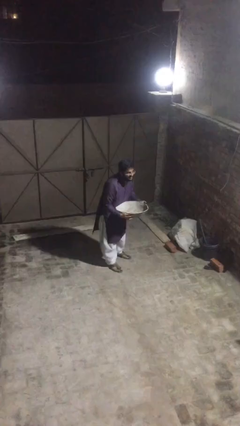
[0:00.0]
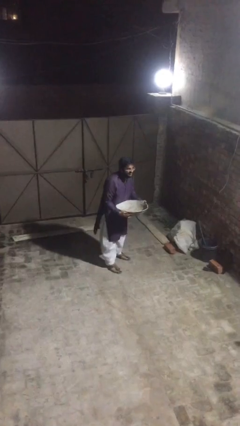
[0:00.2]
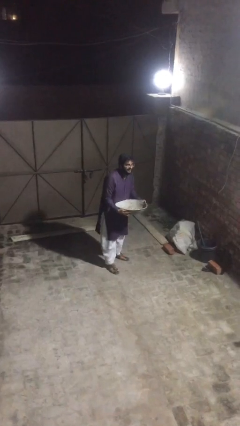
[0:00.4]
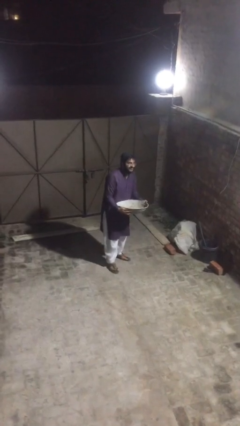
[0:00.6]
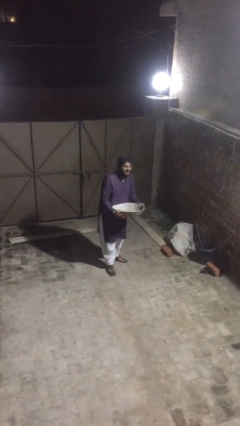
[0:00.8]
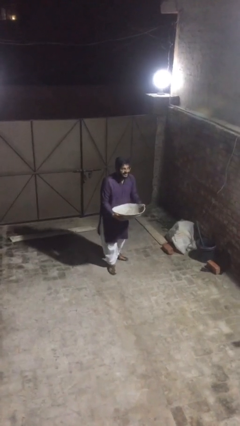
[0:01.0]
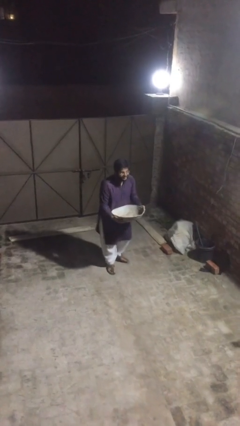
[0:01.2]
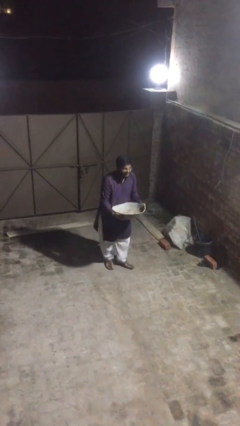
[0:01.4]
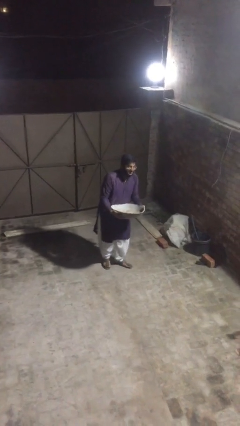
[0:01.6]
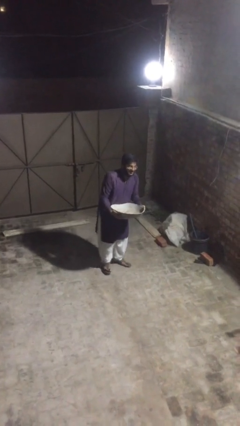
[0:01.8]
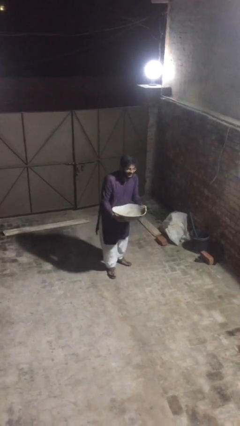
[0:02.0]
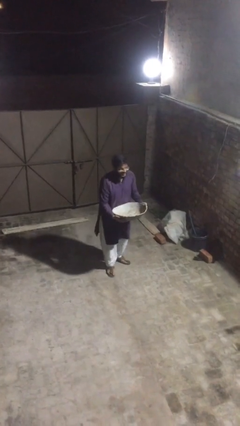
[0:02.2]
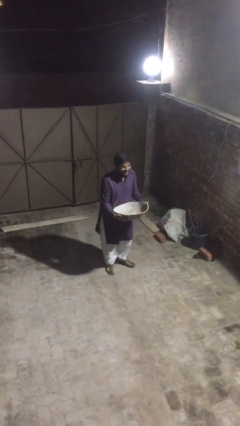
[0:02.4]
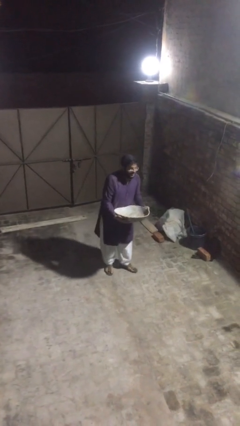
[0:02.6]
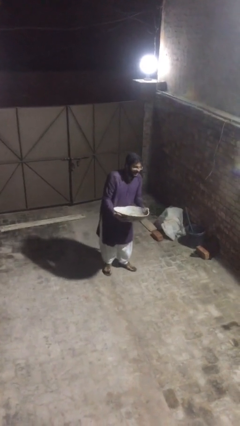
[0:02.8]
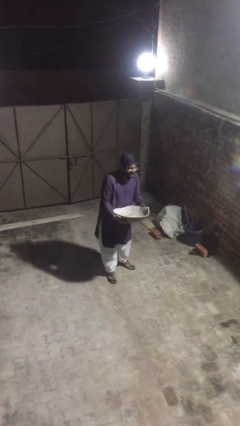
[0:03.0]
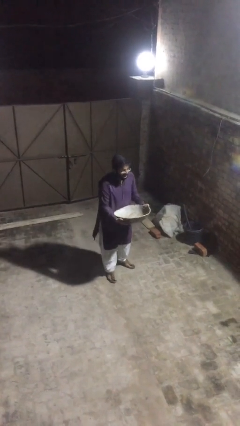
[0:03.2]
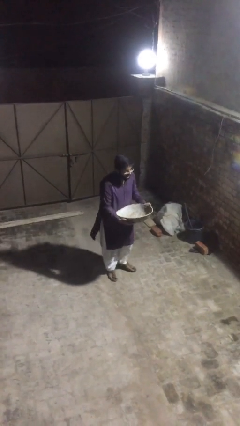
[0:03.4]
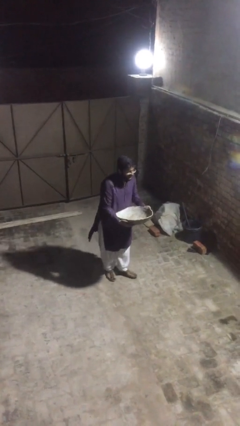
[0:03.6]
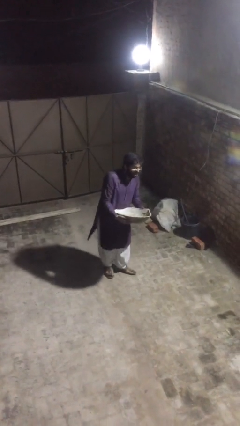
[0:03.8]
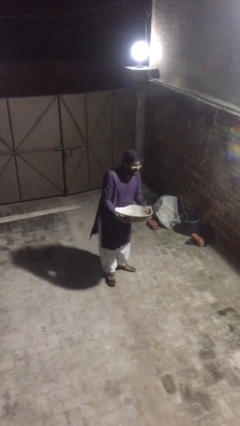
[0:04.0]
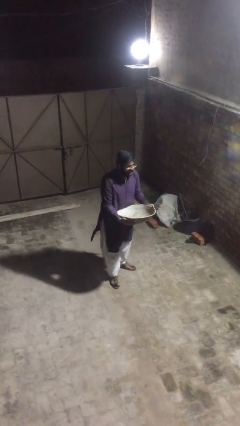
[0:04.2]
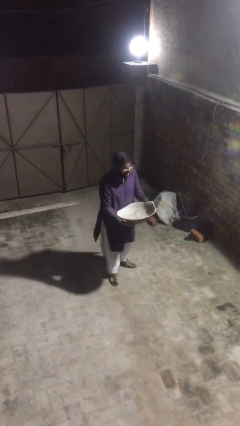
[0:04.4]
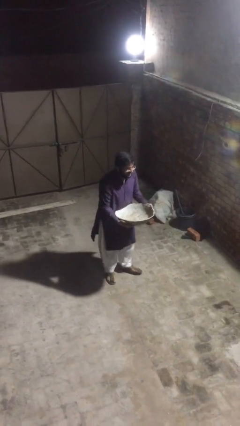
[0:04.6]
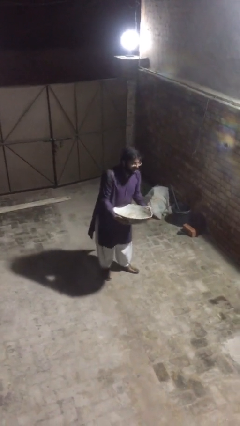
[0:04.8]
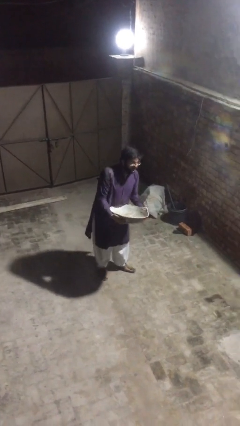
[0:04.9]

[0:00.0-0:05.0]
person carries heavy object

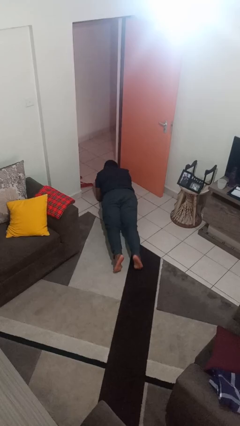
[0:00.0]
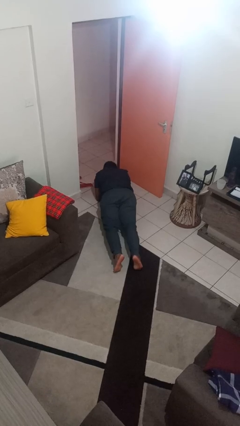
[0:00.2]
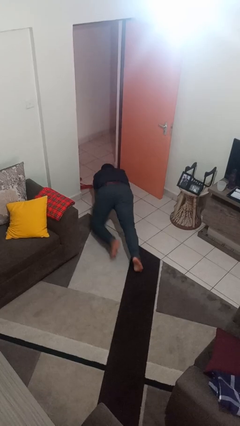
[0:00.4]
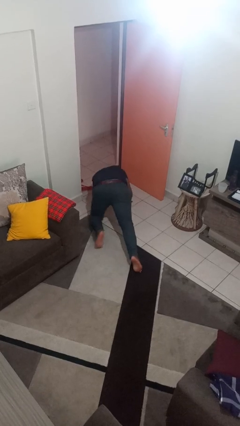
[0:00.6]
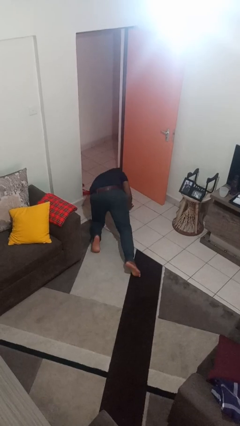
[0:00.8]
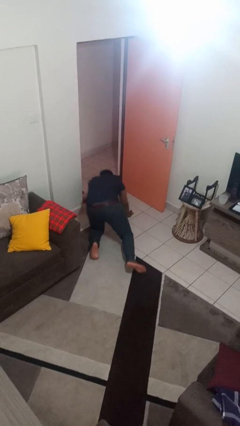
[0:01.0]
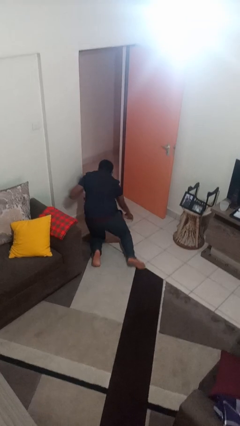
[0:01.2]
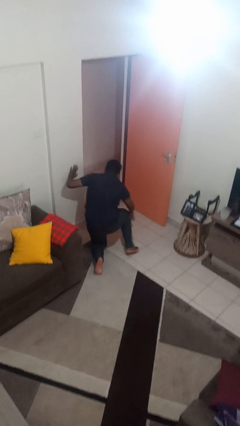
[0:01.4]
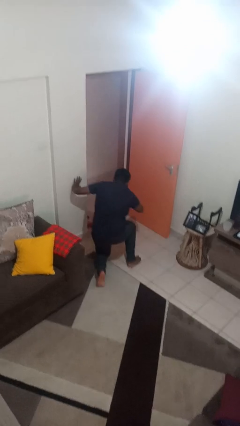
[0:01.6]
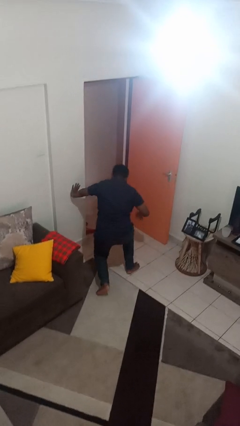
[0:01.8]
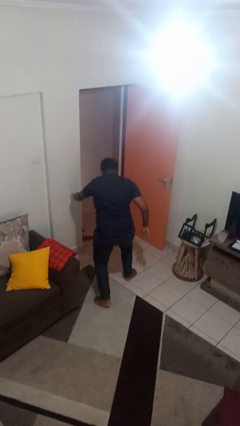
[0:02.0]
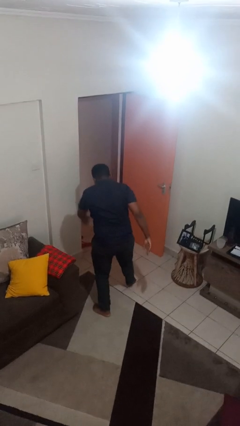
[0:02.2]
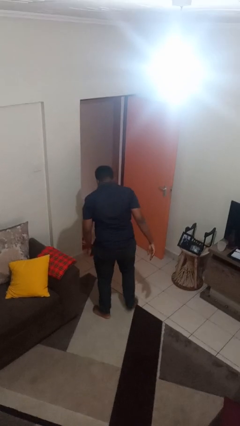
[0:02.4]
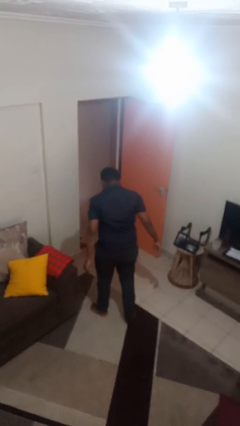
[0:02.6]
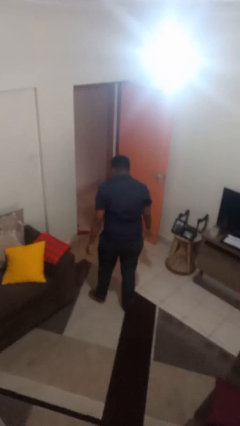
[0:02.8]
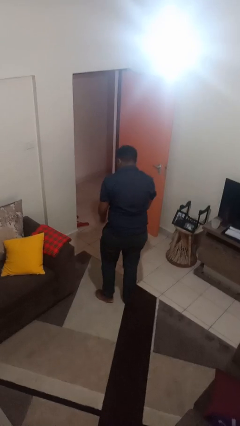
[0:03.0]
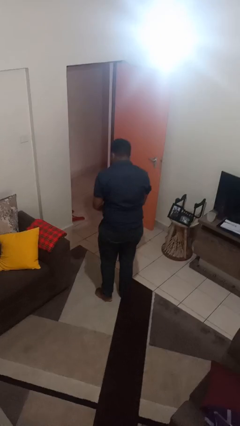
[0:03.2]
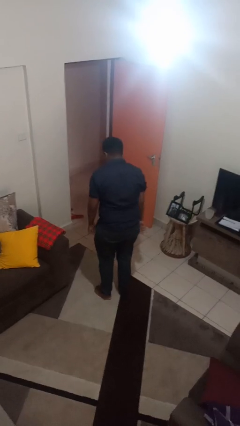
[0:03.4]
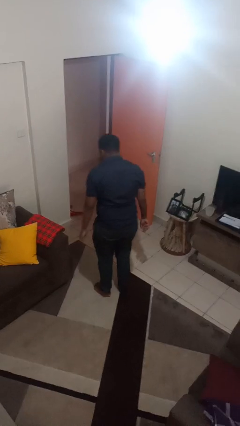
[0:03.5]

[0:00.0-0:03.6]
person stands up from floor

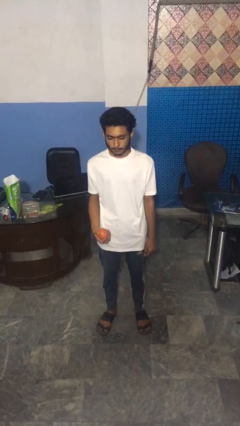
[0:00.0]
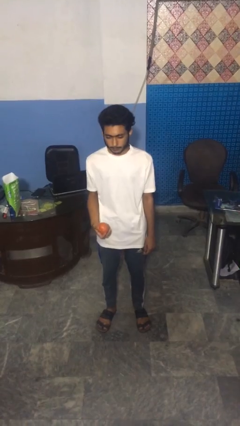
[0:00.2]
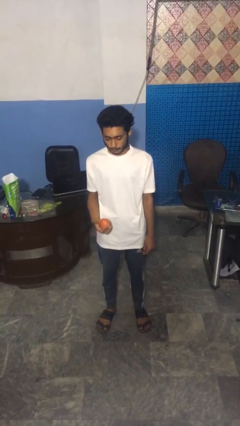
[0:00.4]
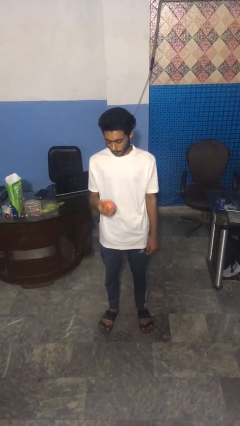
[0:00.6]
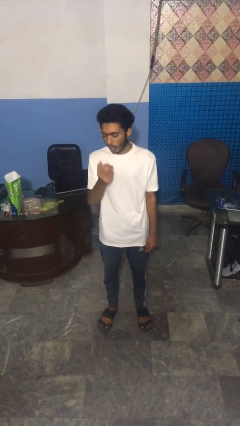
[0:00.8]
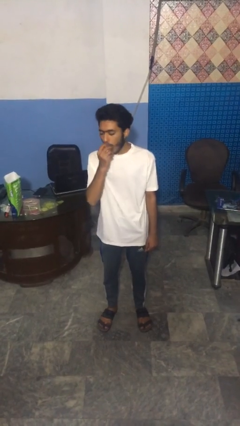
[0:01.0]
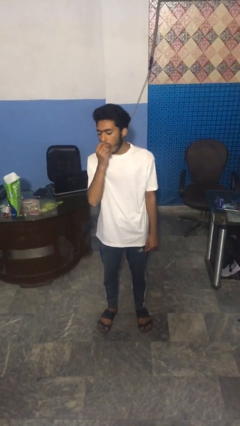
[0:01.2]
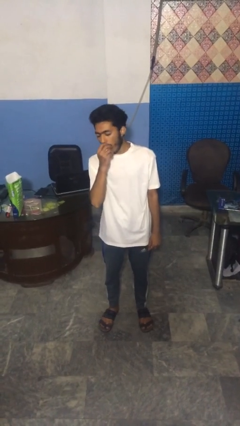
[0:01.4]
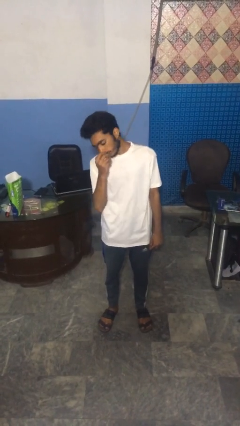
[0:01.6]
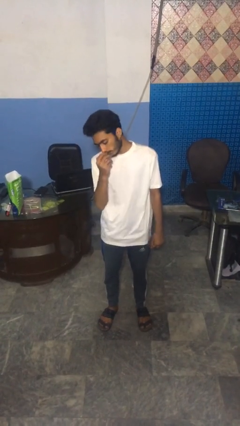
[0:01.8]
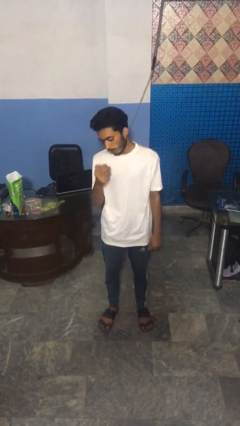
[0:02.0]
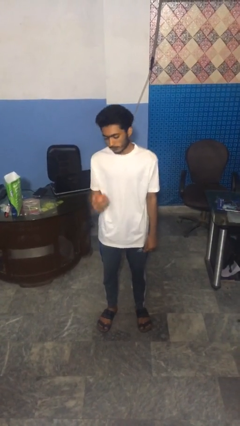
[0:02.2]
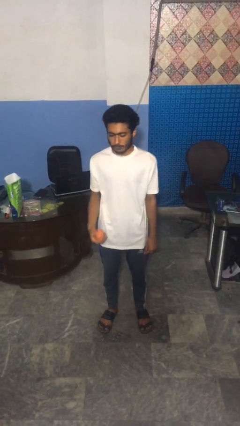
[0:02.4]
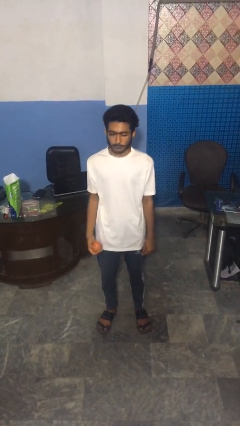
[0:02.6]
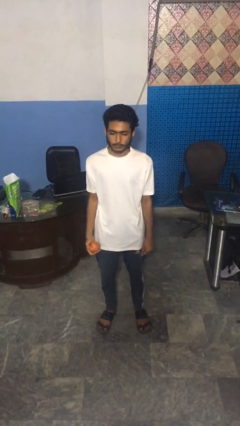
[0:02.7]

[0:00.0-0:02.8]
person eats apple

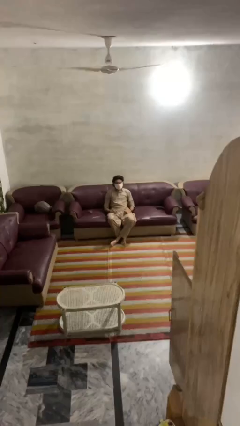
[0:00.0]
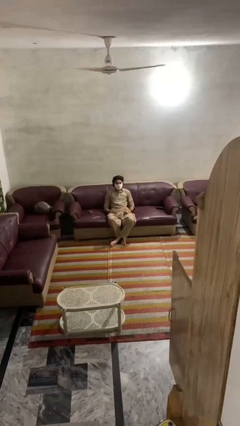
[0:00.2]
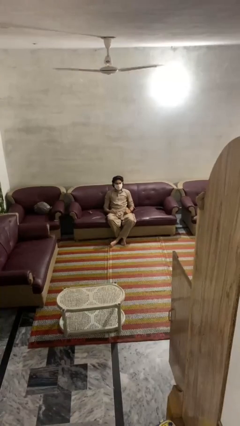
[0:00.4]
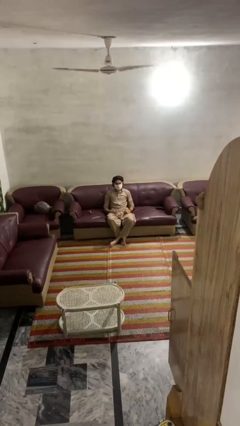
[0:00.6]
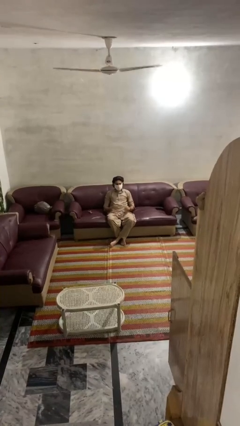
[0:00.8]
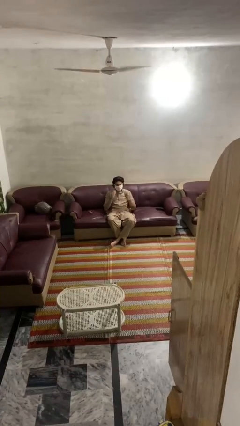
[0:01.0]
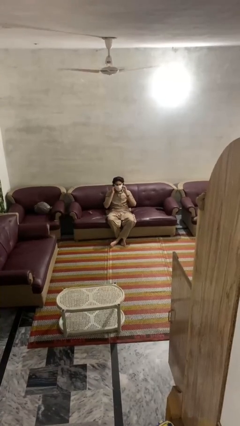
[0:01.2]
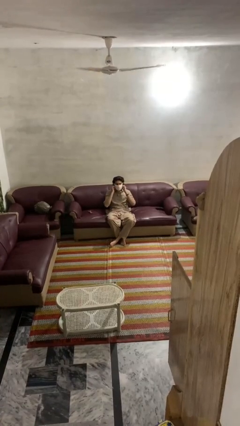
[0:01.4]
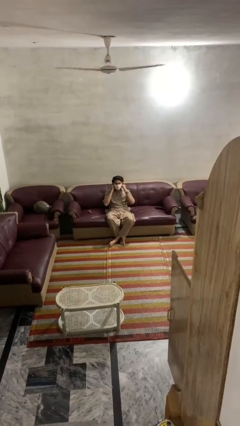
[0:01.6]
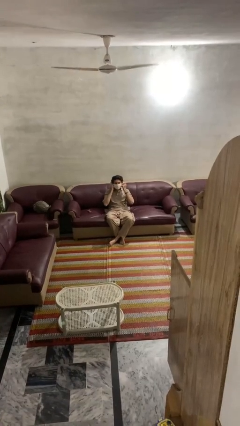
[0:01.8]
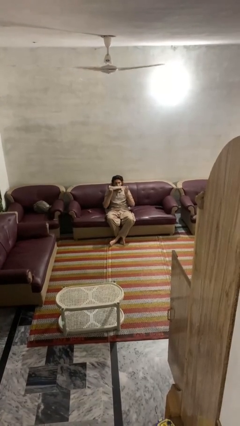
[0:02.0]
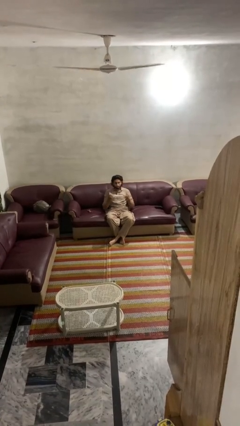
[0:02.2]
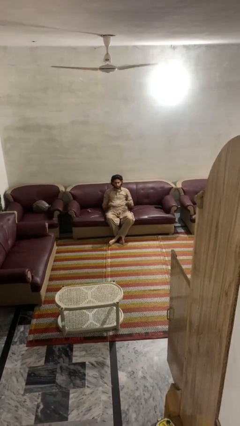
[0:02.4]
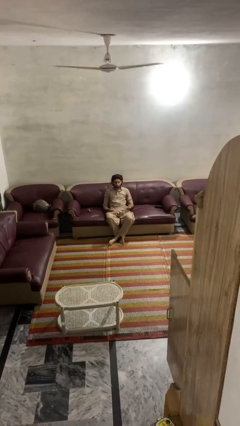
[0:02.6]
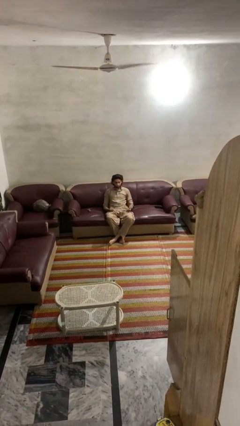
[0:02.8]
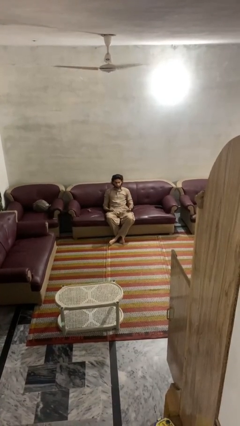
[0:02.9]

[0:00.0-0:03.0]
person takes off facemask

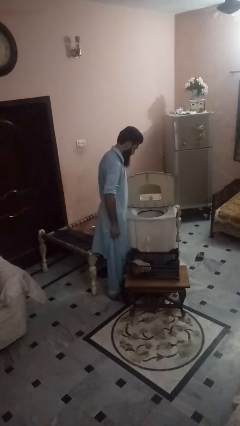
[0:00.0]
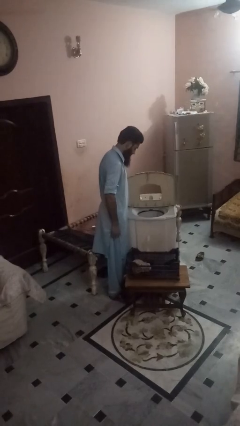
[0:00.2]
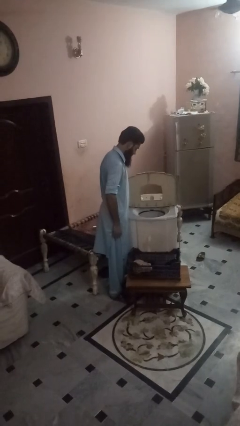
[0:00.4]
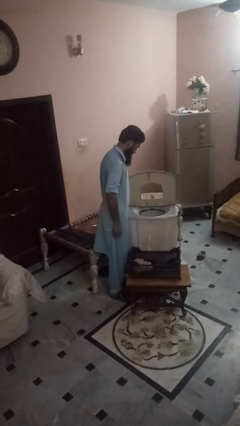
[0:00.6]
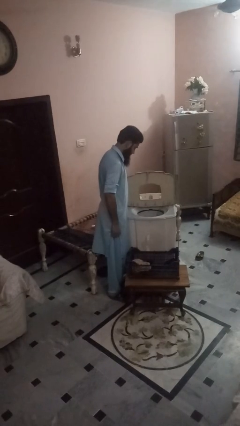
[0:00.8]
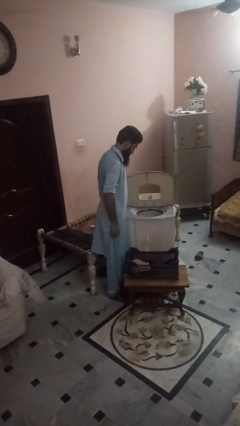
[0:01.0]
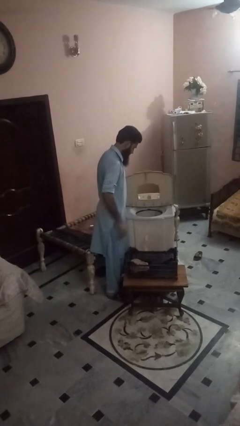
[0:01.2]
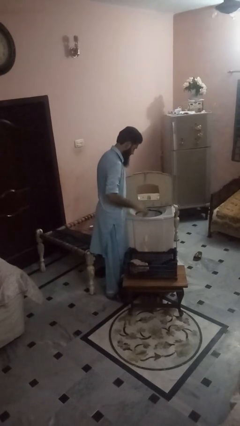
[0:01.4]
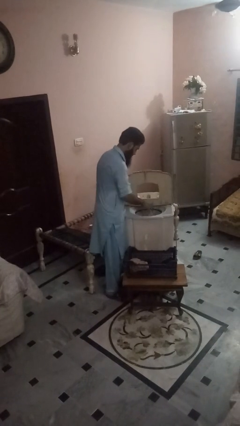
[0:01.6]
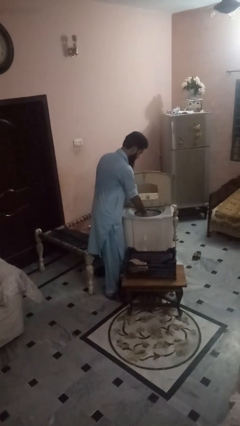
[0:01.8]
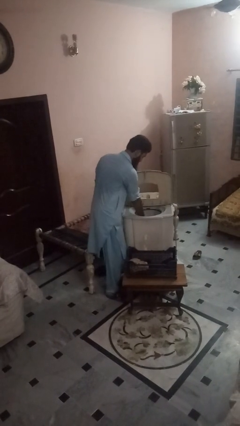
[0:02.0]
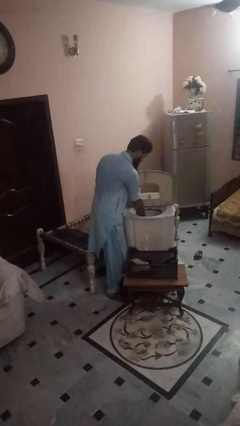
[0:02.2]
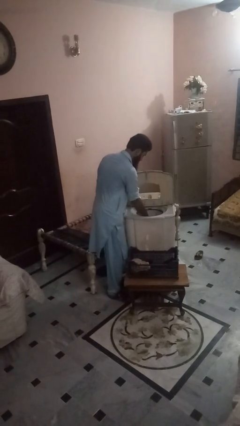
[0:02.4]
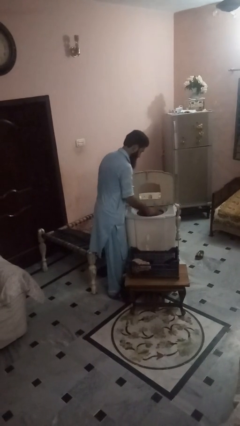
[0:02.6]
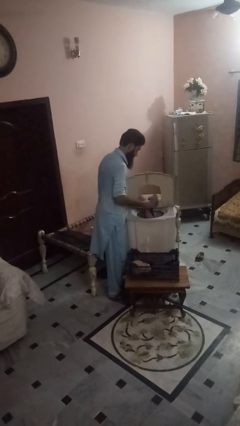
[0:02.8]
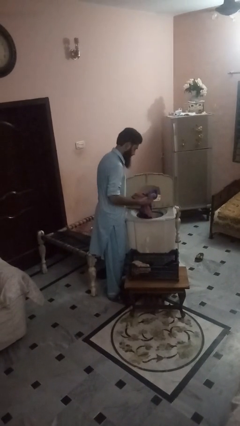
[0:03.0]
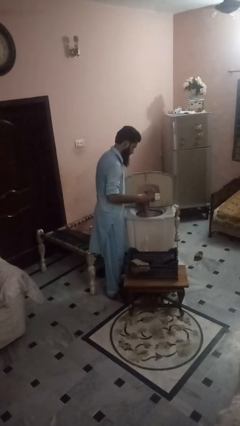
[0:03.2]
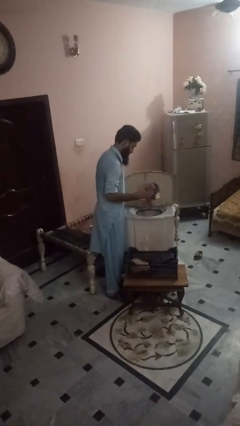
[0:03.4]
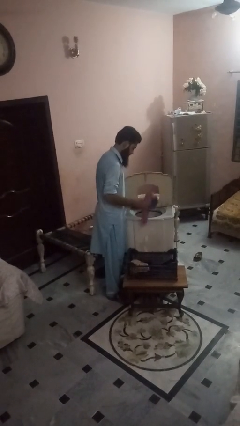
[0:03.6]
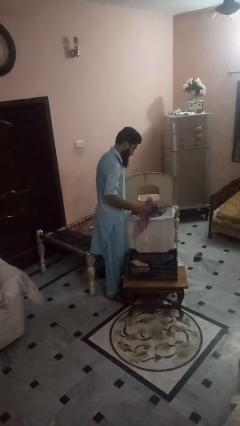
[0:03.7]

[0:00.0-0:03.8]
person unloads dishwasher
